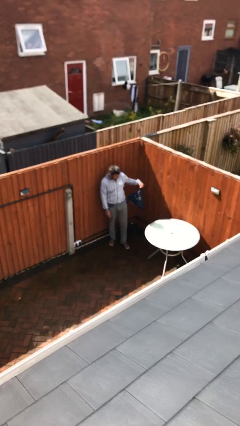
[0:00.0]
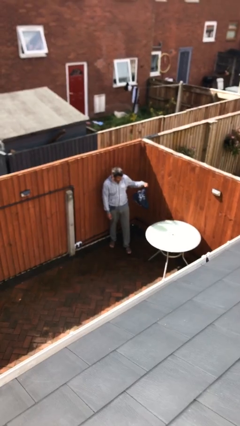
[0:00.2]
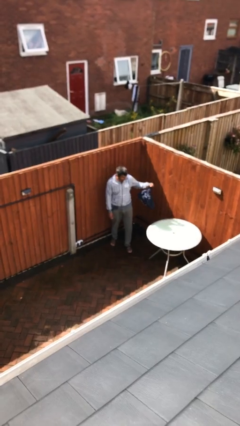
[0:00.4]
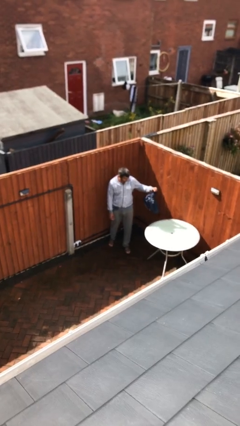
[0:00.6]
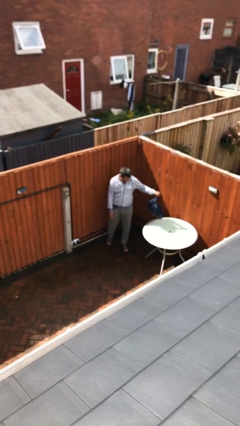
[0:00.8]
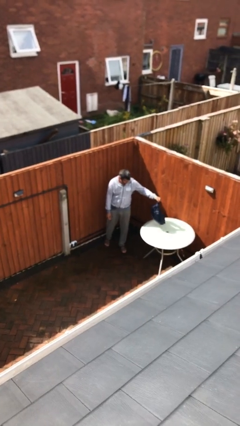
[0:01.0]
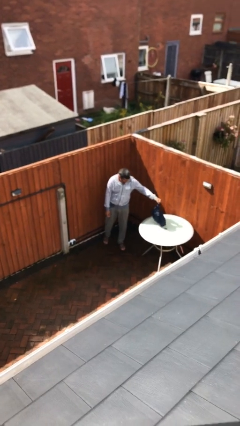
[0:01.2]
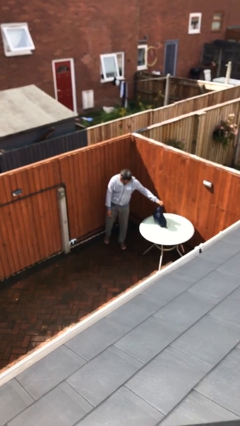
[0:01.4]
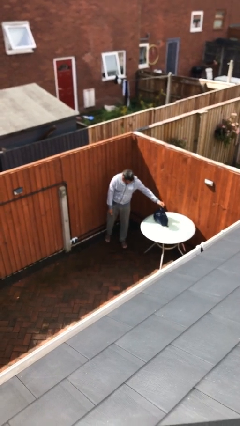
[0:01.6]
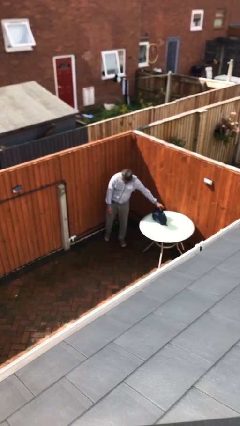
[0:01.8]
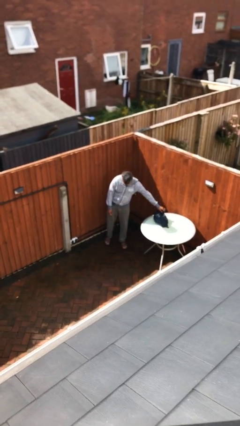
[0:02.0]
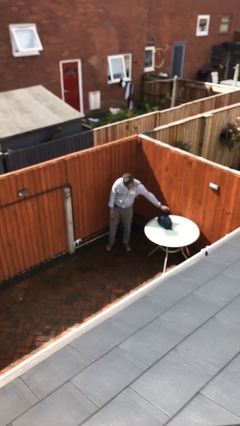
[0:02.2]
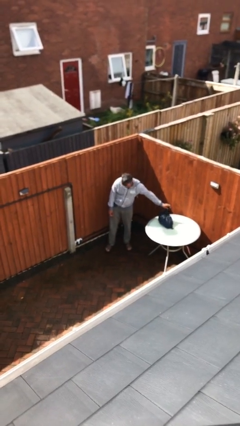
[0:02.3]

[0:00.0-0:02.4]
person puts down object on table

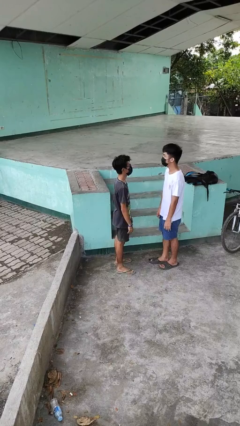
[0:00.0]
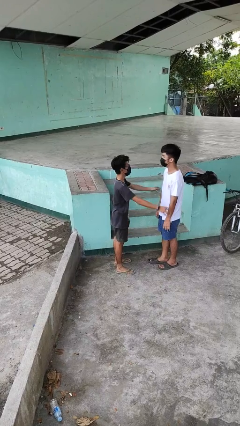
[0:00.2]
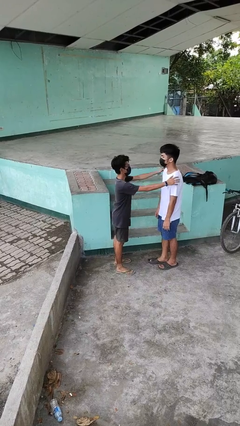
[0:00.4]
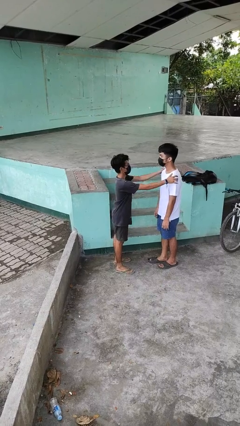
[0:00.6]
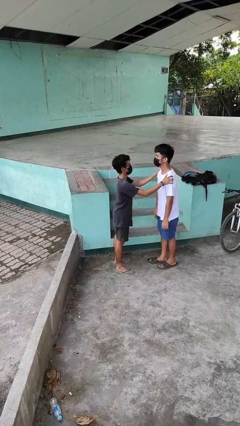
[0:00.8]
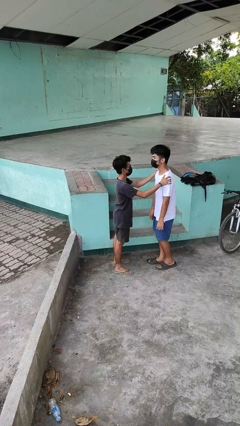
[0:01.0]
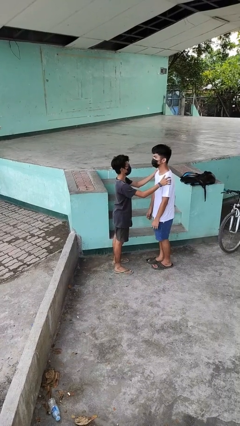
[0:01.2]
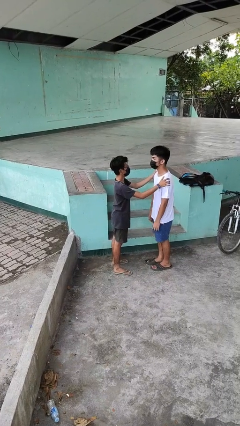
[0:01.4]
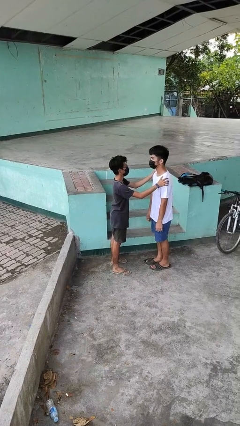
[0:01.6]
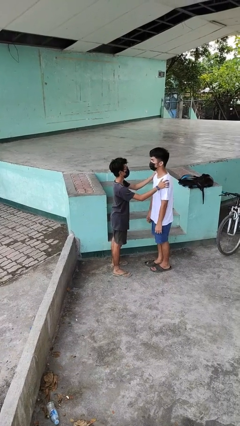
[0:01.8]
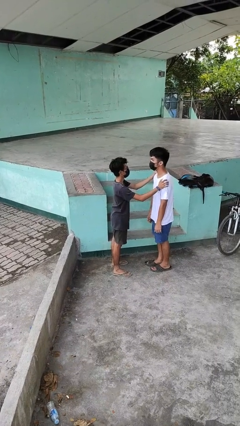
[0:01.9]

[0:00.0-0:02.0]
person grabs person by shoulder

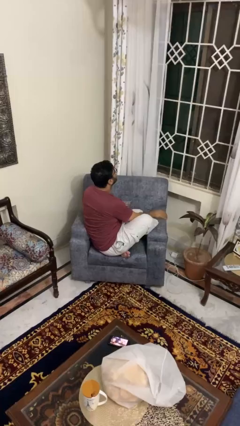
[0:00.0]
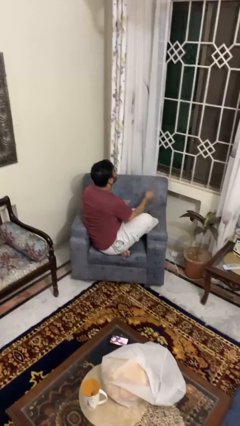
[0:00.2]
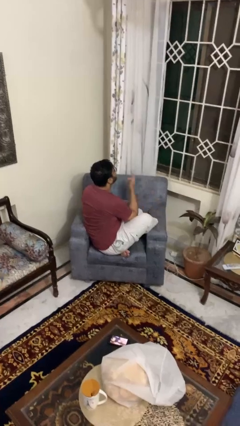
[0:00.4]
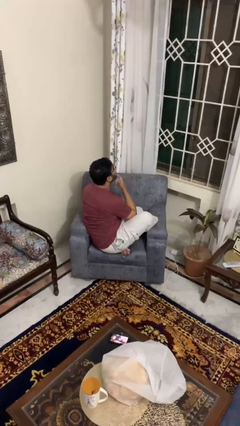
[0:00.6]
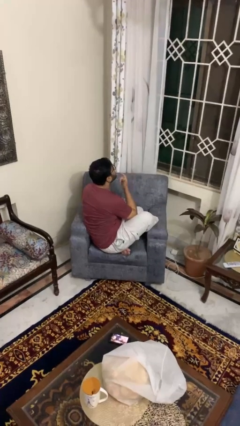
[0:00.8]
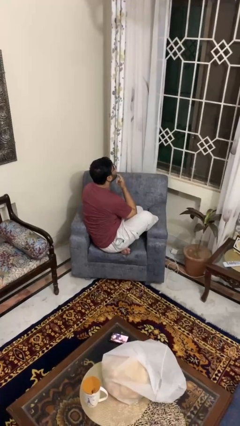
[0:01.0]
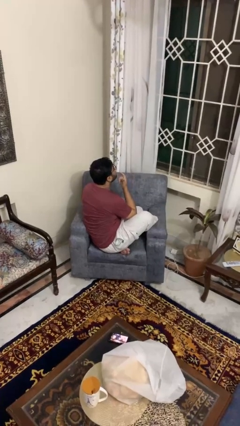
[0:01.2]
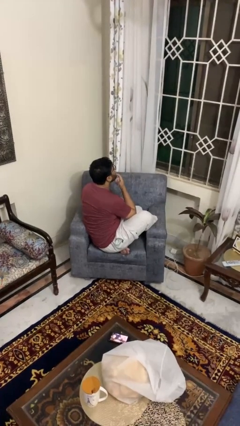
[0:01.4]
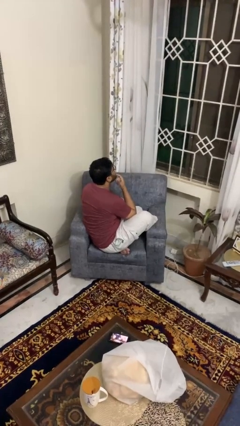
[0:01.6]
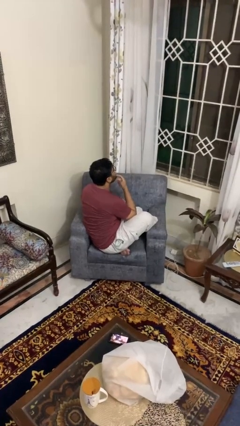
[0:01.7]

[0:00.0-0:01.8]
person strokes chin

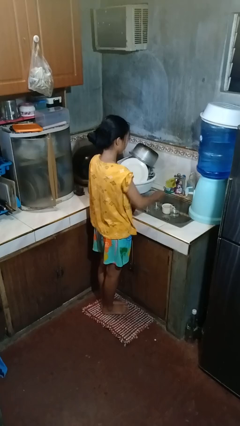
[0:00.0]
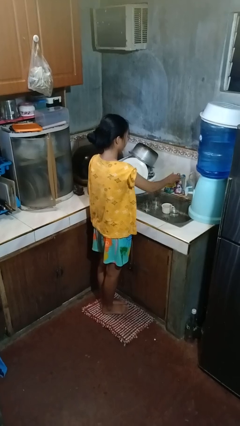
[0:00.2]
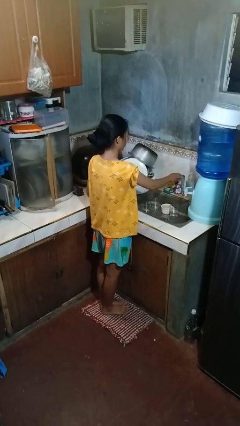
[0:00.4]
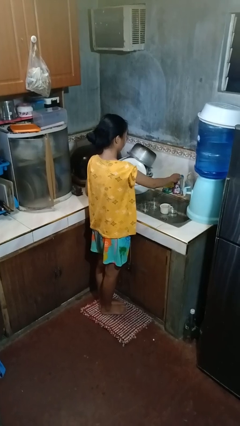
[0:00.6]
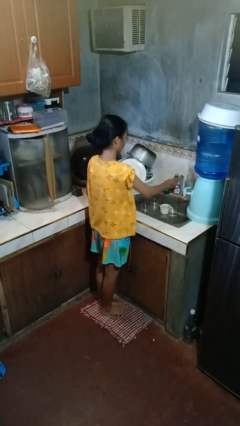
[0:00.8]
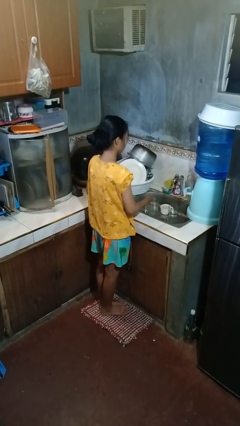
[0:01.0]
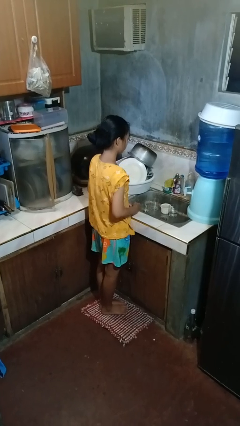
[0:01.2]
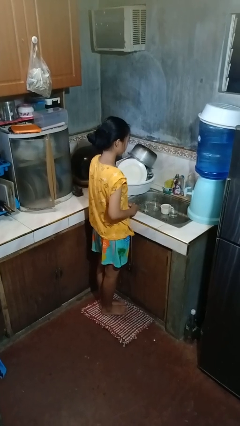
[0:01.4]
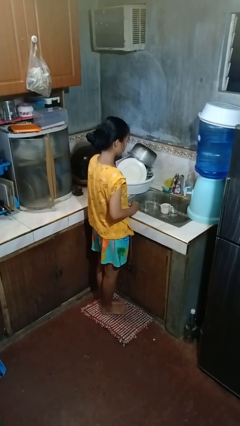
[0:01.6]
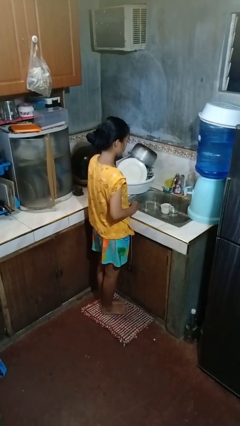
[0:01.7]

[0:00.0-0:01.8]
person turns on faucet

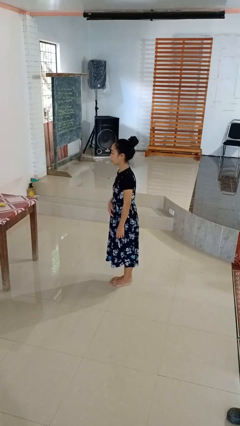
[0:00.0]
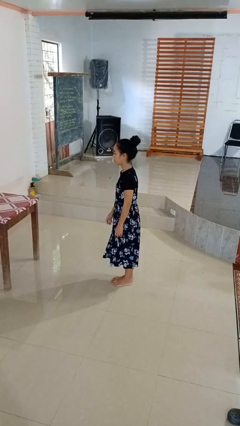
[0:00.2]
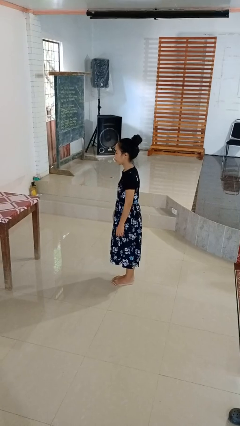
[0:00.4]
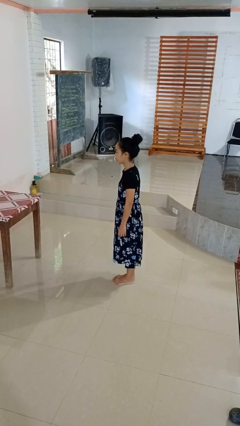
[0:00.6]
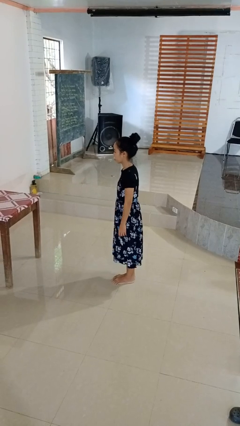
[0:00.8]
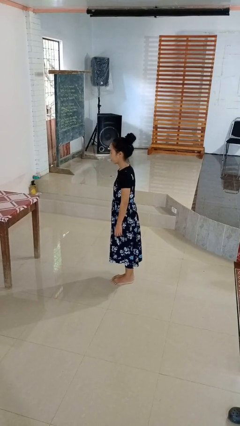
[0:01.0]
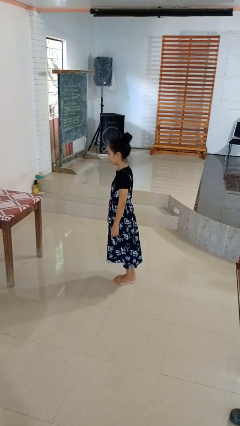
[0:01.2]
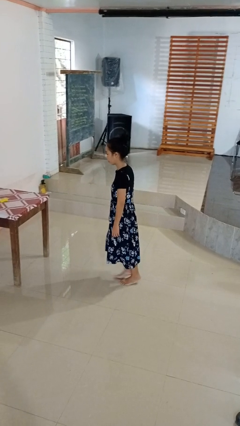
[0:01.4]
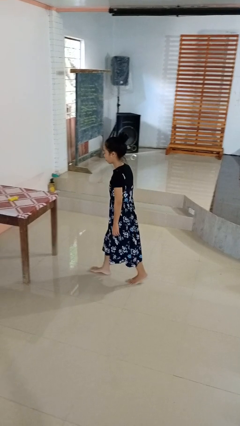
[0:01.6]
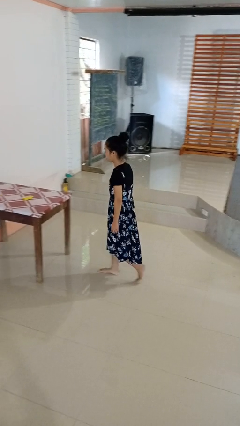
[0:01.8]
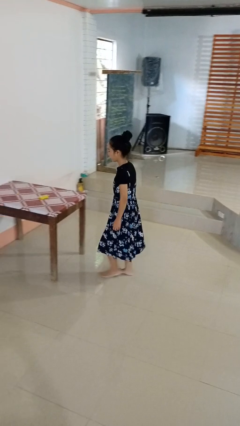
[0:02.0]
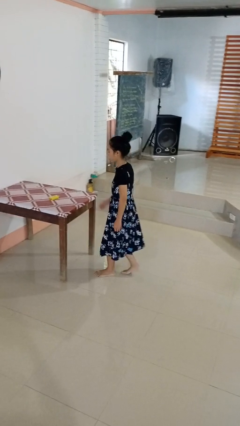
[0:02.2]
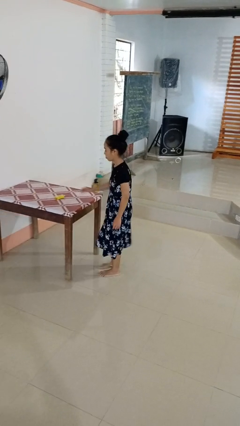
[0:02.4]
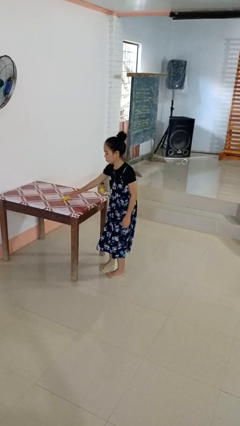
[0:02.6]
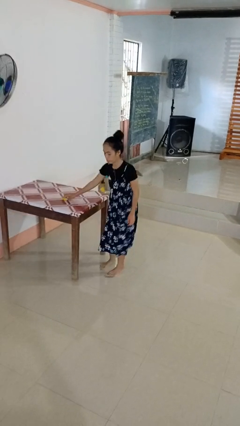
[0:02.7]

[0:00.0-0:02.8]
person throws object on table

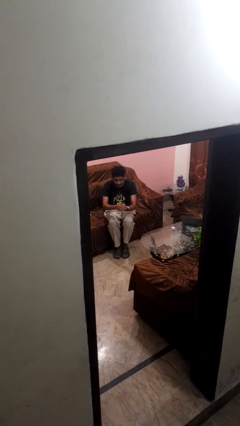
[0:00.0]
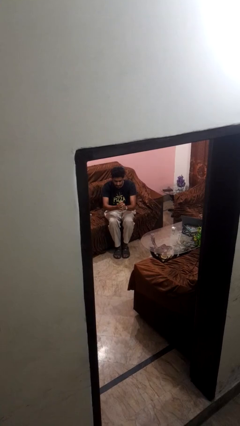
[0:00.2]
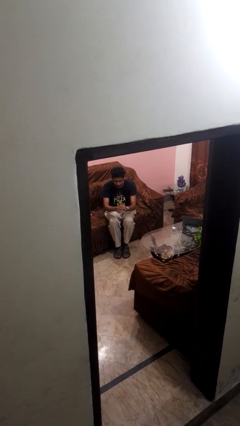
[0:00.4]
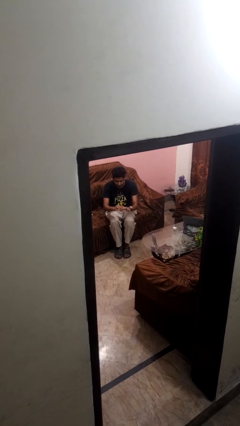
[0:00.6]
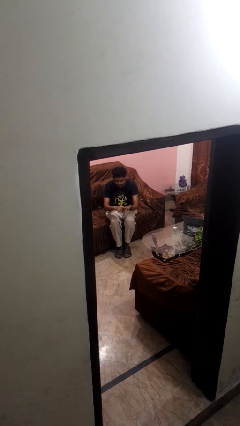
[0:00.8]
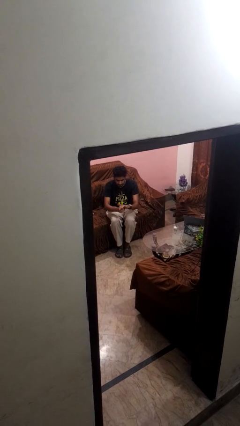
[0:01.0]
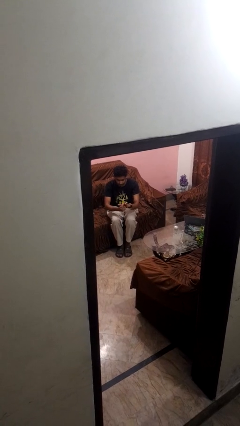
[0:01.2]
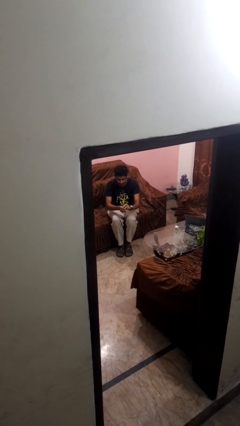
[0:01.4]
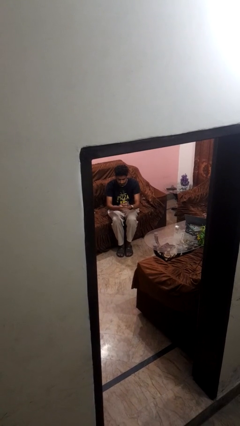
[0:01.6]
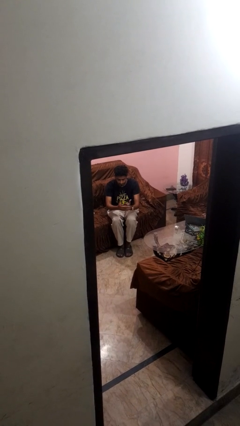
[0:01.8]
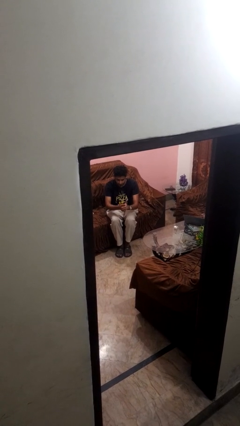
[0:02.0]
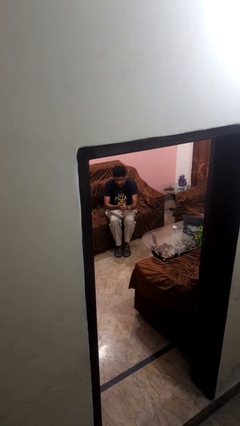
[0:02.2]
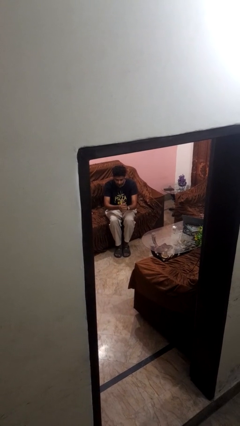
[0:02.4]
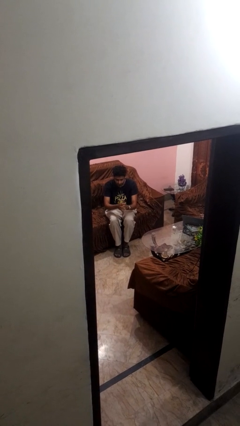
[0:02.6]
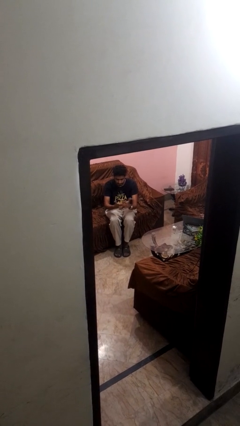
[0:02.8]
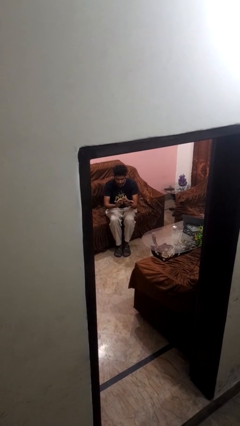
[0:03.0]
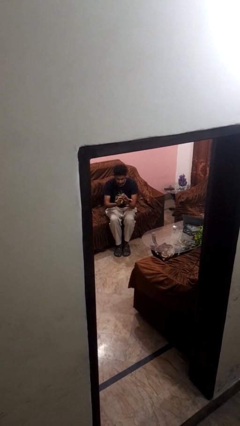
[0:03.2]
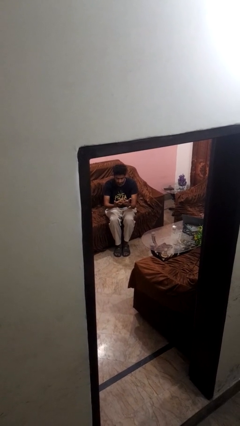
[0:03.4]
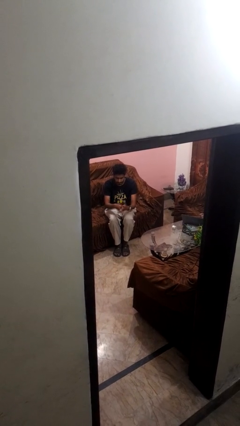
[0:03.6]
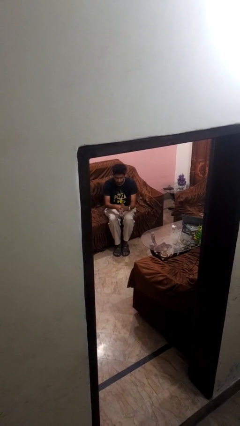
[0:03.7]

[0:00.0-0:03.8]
person cracks knuckles

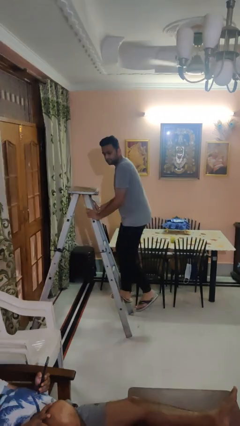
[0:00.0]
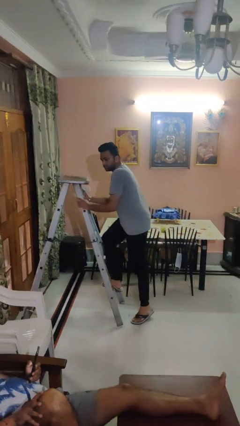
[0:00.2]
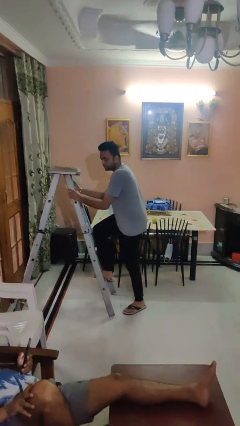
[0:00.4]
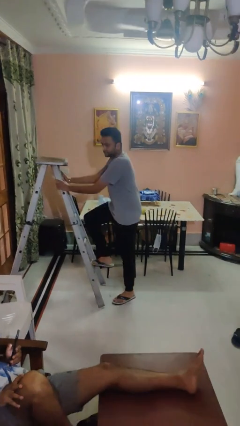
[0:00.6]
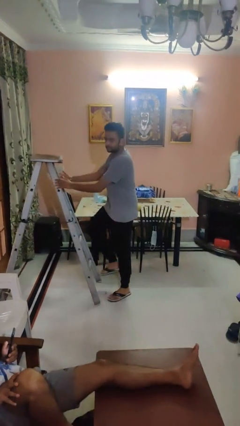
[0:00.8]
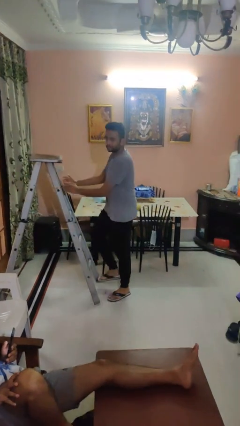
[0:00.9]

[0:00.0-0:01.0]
person climbs down ladder

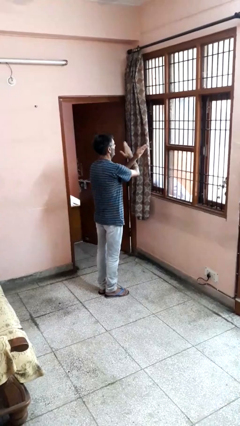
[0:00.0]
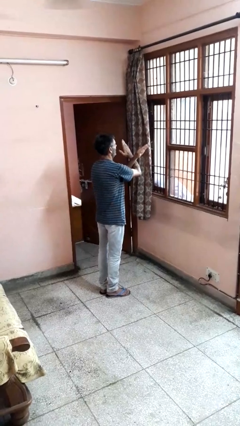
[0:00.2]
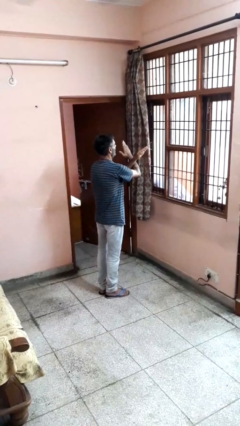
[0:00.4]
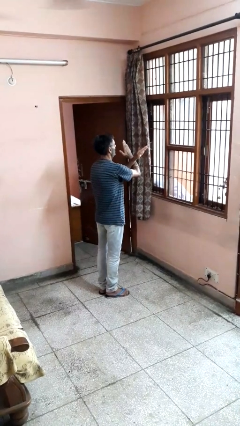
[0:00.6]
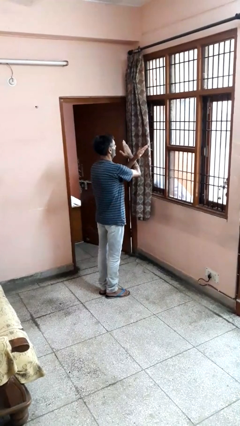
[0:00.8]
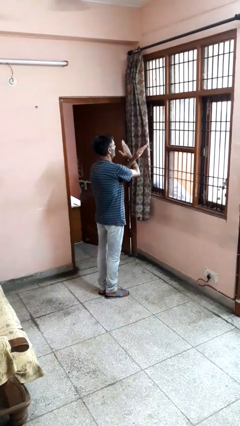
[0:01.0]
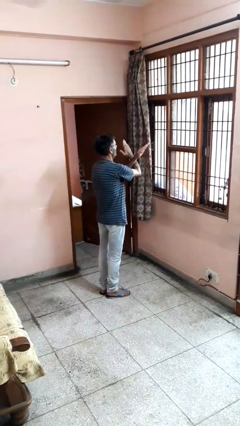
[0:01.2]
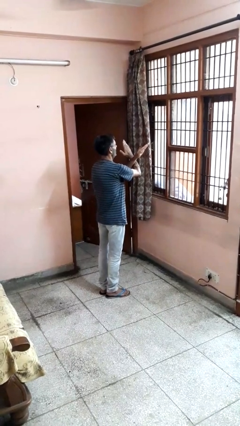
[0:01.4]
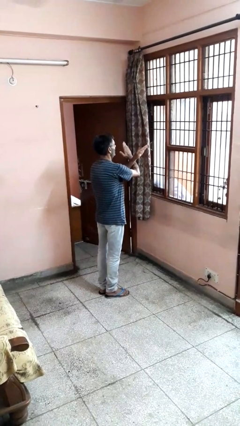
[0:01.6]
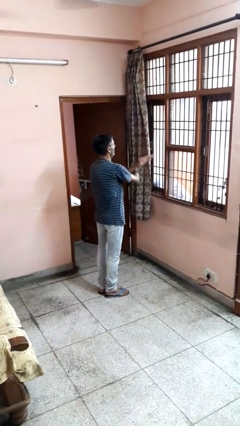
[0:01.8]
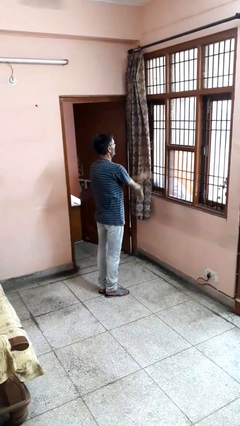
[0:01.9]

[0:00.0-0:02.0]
person gestures arms x
